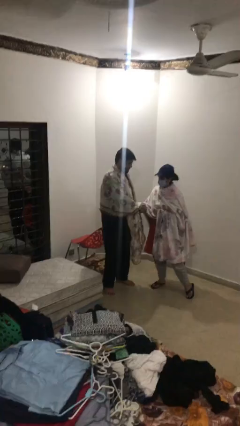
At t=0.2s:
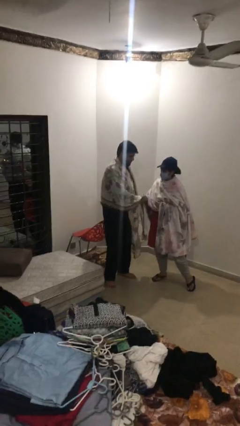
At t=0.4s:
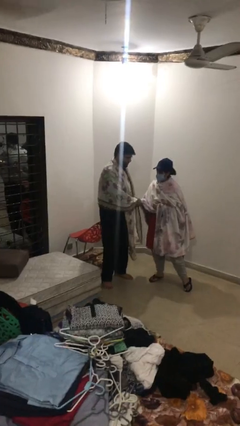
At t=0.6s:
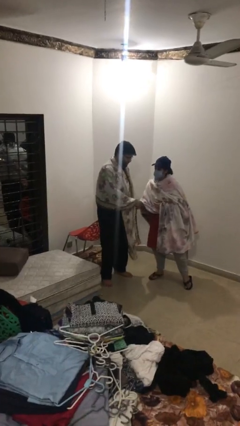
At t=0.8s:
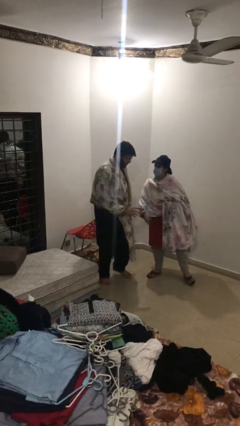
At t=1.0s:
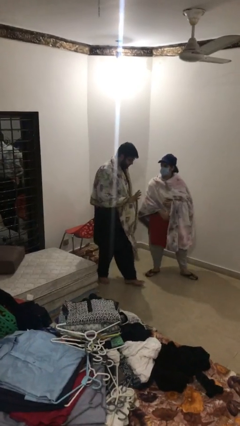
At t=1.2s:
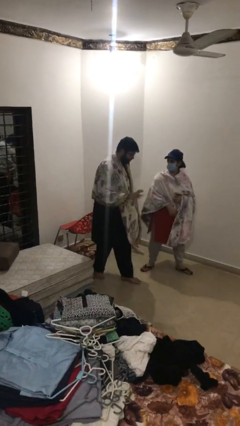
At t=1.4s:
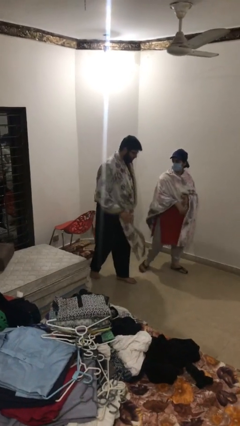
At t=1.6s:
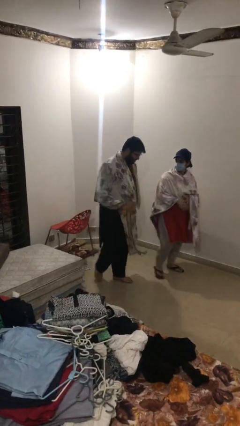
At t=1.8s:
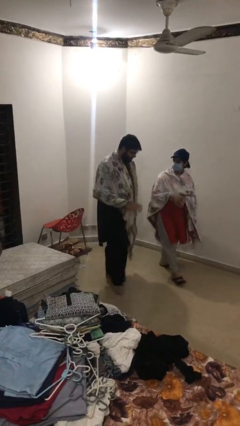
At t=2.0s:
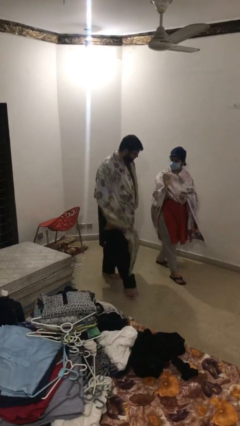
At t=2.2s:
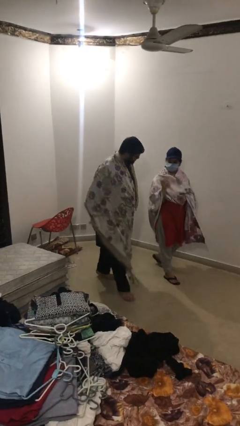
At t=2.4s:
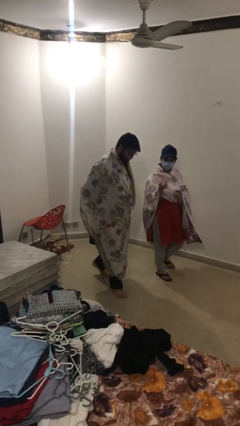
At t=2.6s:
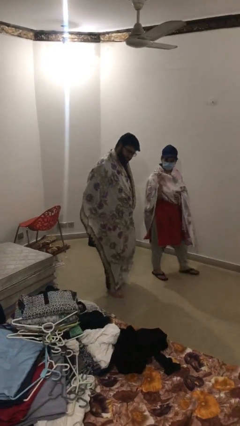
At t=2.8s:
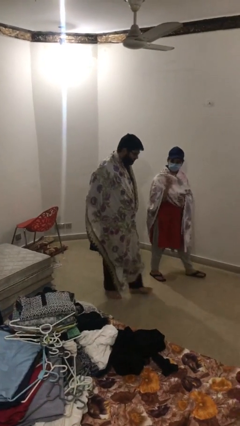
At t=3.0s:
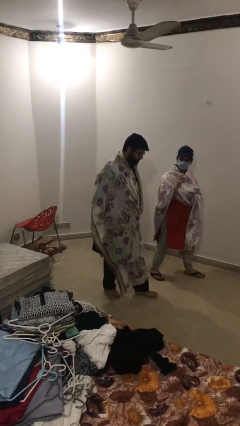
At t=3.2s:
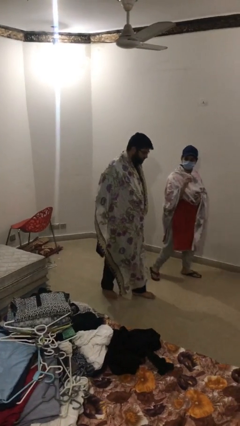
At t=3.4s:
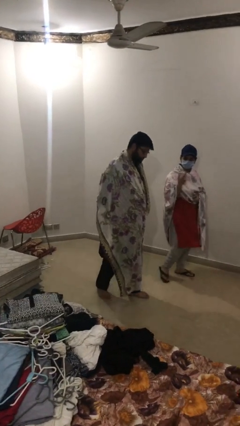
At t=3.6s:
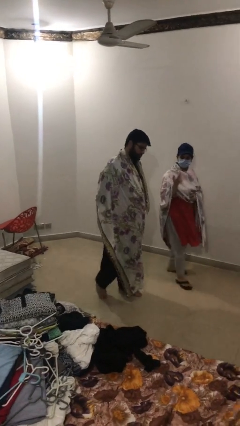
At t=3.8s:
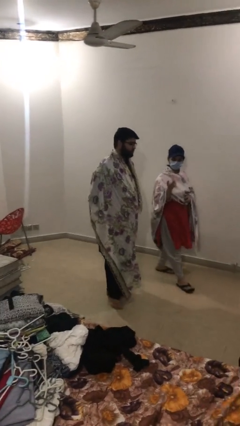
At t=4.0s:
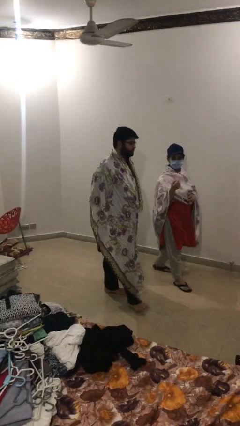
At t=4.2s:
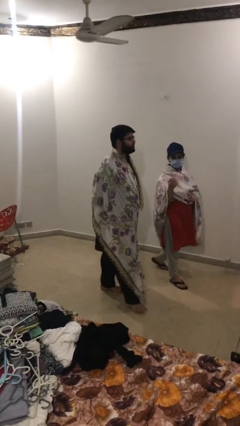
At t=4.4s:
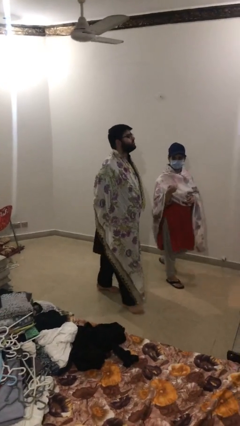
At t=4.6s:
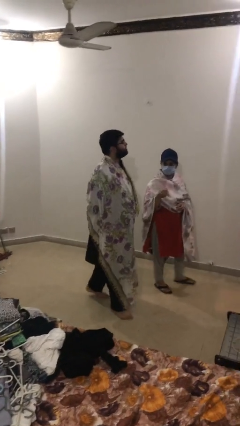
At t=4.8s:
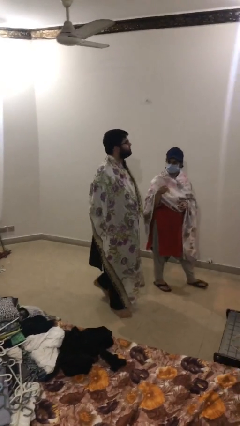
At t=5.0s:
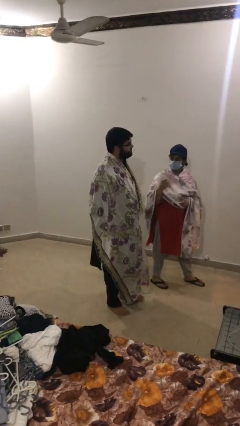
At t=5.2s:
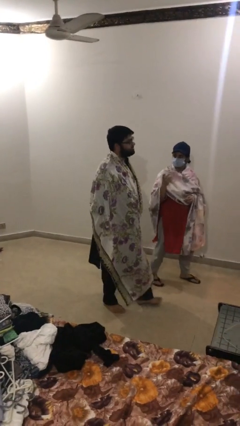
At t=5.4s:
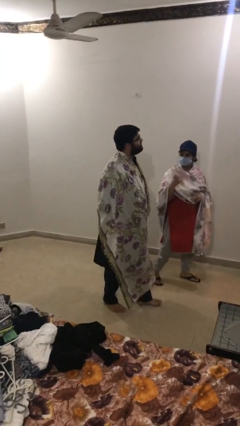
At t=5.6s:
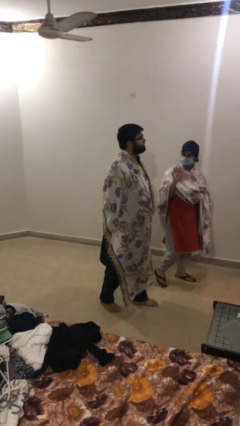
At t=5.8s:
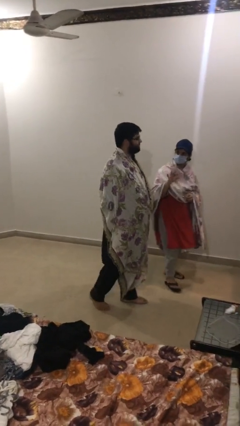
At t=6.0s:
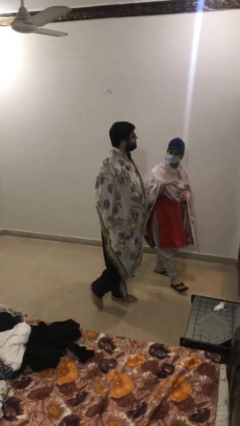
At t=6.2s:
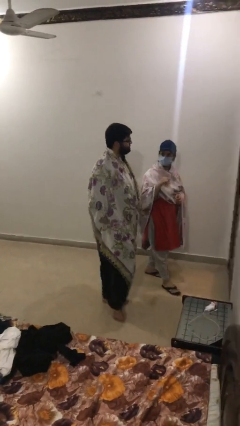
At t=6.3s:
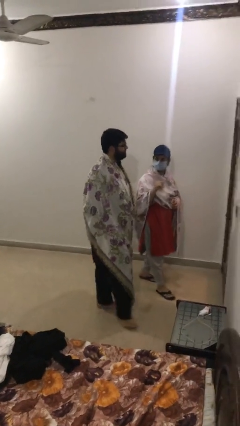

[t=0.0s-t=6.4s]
person talks to person

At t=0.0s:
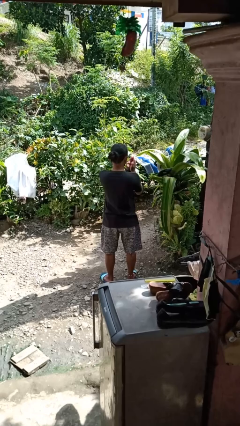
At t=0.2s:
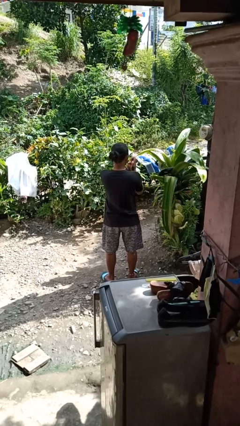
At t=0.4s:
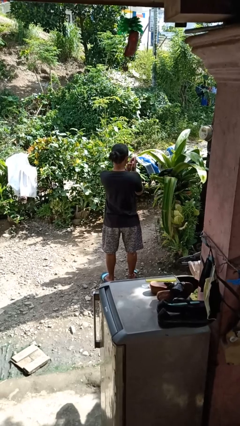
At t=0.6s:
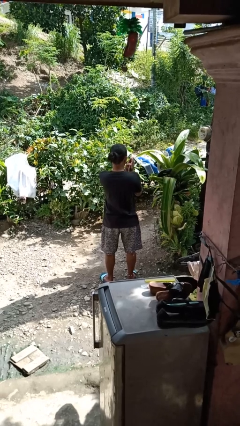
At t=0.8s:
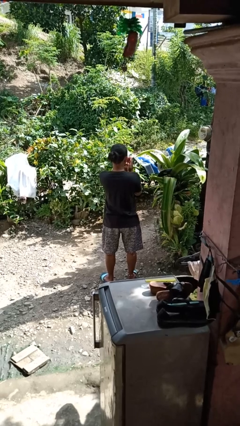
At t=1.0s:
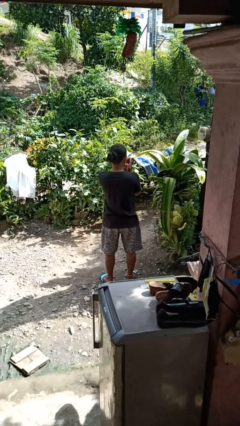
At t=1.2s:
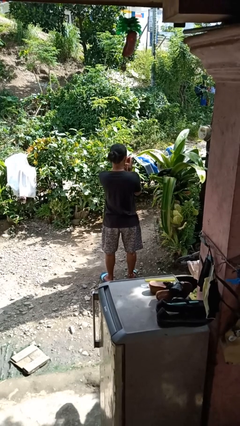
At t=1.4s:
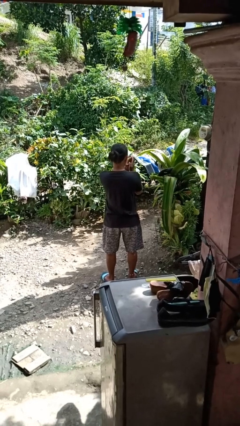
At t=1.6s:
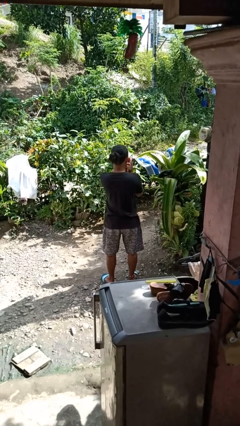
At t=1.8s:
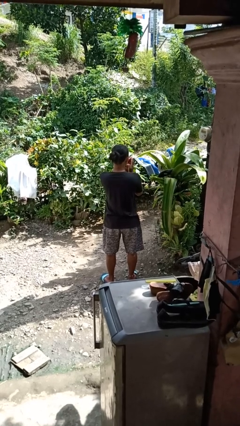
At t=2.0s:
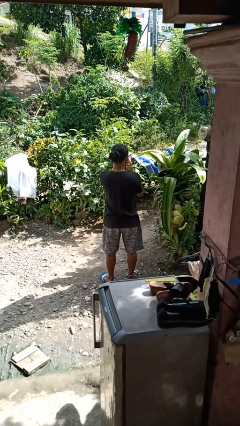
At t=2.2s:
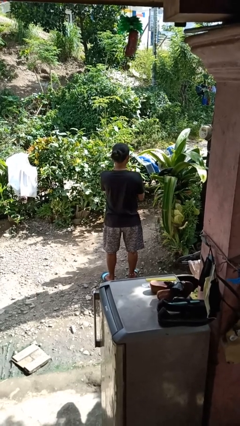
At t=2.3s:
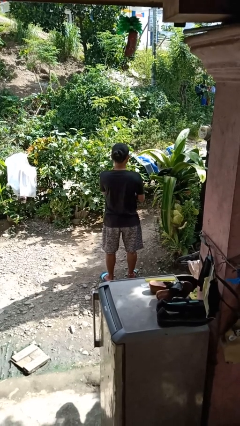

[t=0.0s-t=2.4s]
person blows into hands

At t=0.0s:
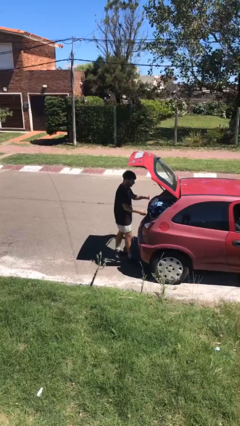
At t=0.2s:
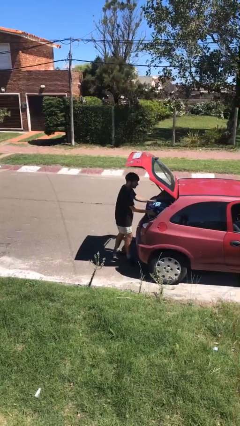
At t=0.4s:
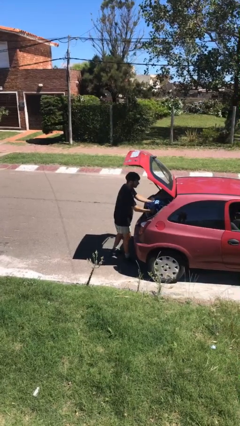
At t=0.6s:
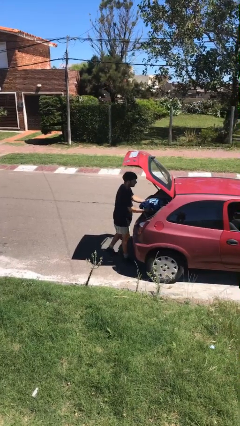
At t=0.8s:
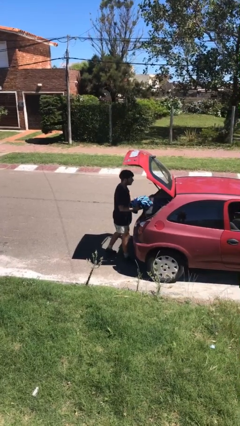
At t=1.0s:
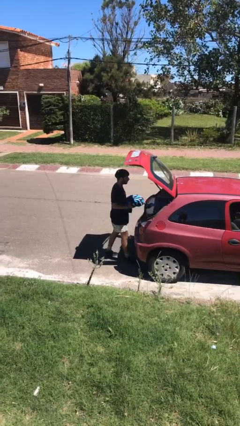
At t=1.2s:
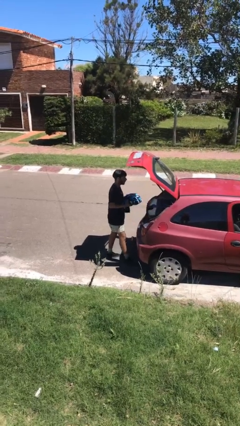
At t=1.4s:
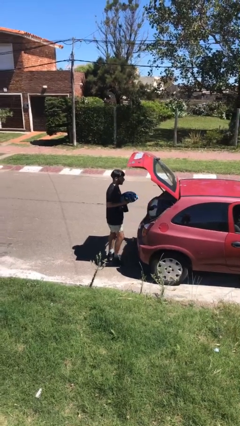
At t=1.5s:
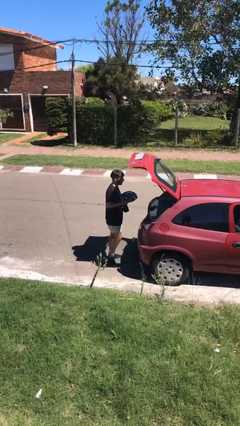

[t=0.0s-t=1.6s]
person unloads car

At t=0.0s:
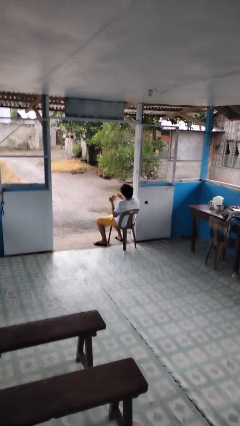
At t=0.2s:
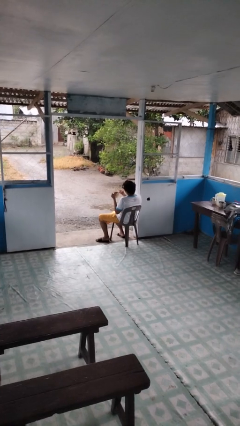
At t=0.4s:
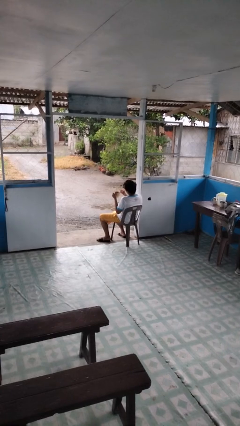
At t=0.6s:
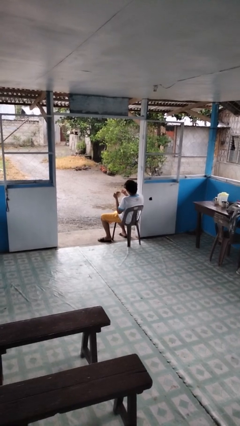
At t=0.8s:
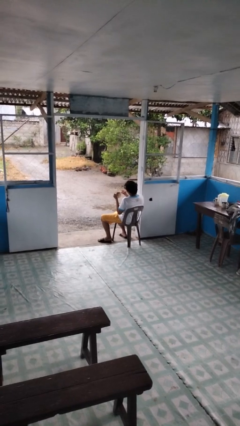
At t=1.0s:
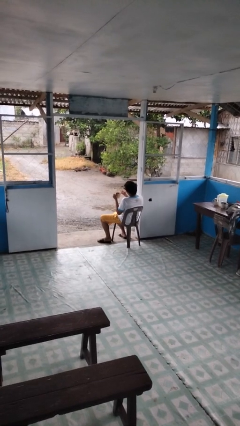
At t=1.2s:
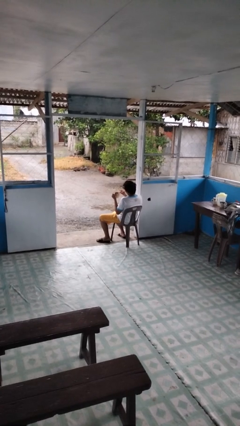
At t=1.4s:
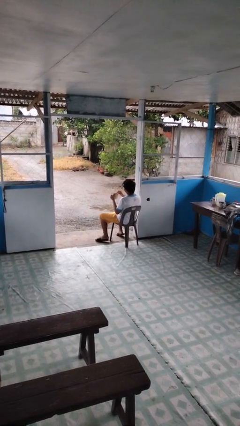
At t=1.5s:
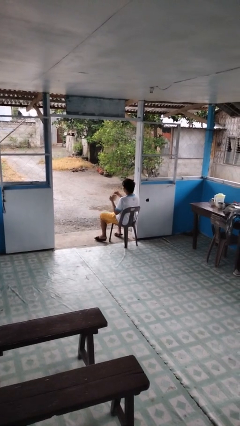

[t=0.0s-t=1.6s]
person drinks from straw

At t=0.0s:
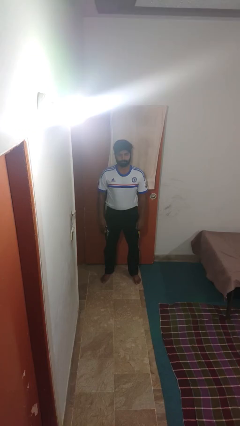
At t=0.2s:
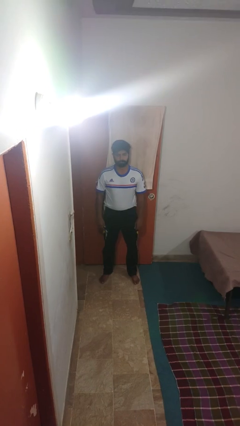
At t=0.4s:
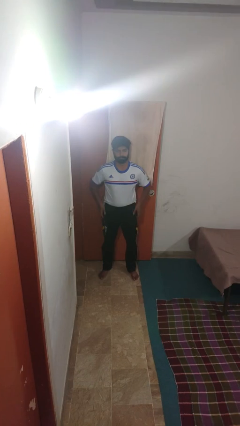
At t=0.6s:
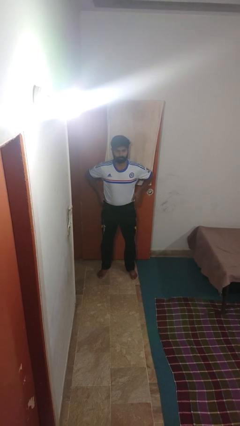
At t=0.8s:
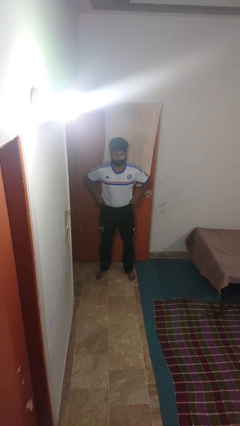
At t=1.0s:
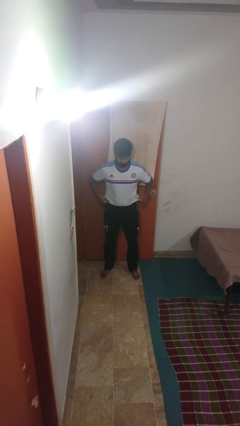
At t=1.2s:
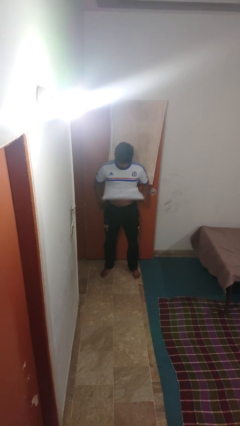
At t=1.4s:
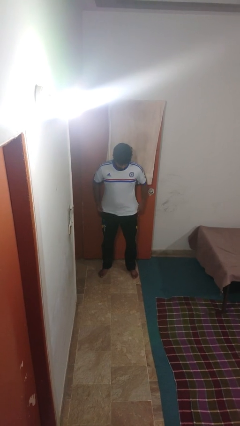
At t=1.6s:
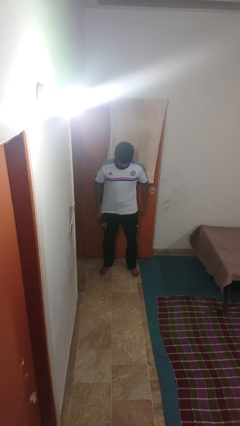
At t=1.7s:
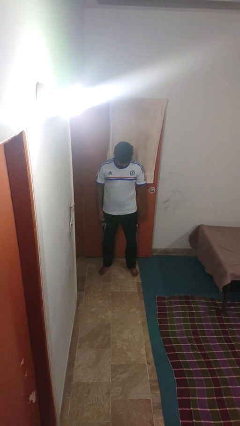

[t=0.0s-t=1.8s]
person untucks shirt

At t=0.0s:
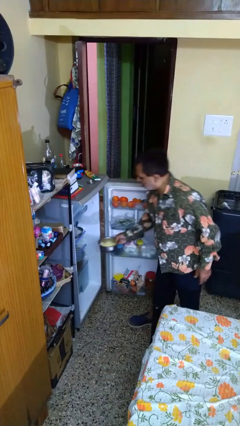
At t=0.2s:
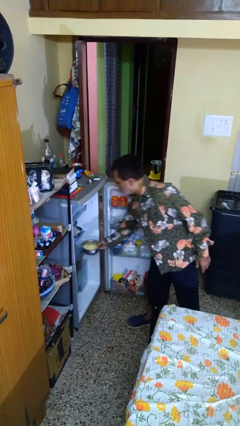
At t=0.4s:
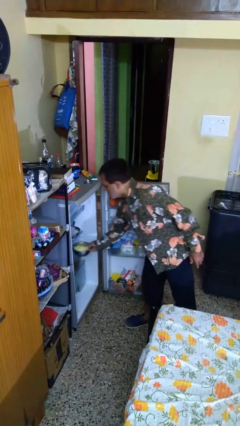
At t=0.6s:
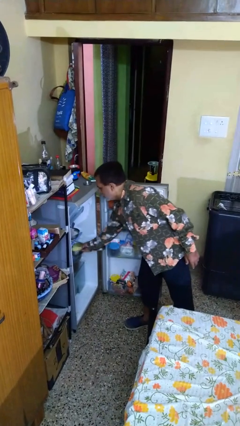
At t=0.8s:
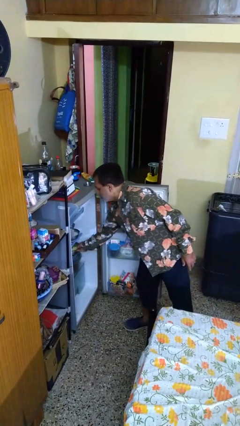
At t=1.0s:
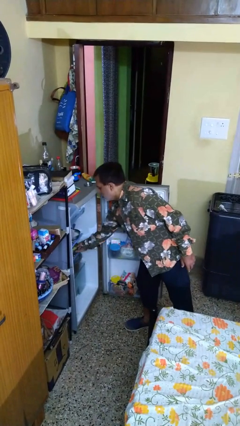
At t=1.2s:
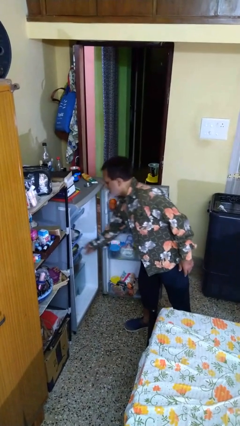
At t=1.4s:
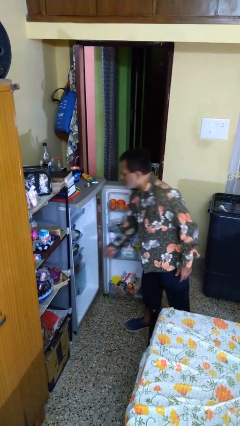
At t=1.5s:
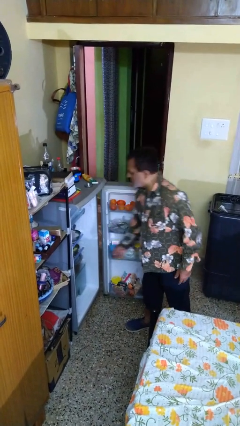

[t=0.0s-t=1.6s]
person puts object into refrigerator

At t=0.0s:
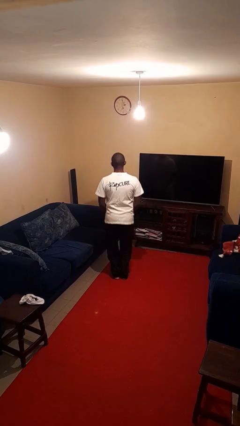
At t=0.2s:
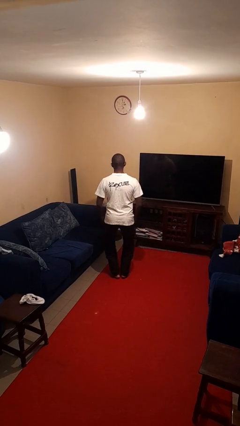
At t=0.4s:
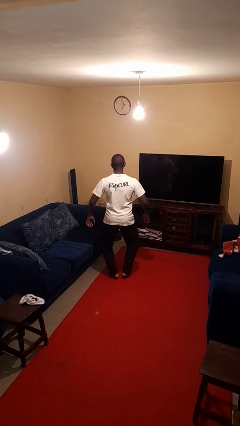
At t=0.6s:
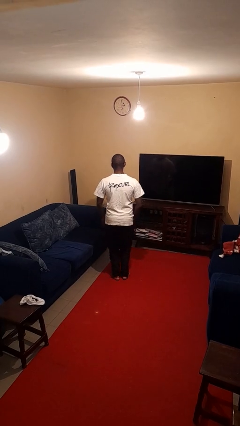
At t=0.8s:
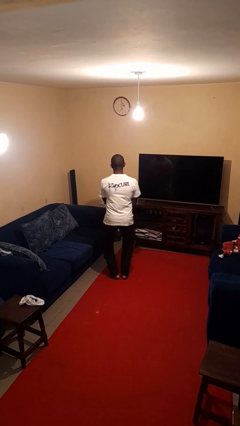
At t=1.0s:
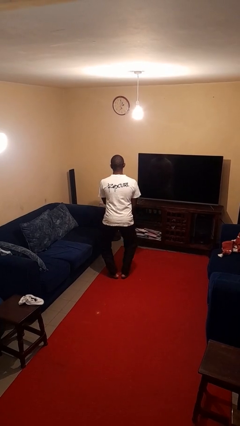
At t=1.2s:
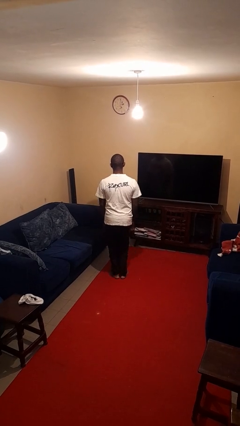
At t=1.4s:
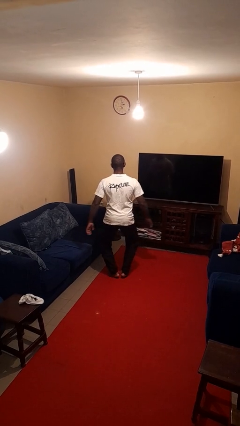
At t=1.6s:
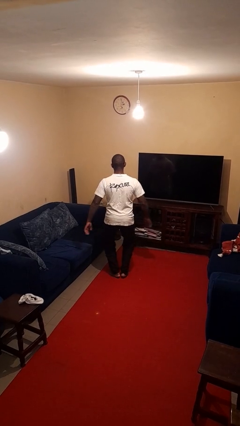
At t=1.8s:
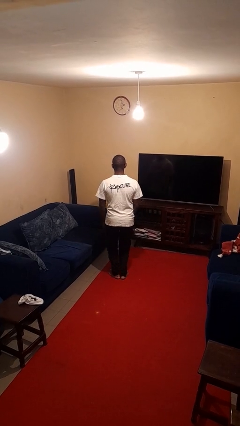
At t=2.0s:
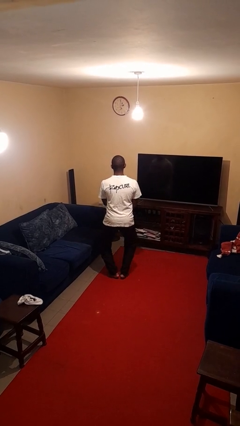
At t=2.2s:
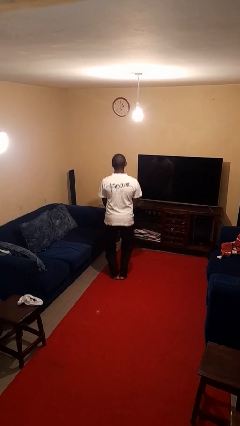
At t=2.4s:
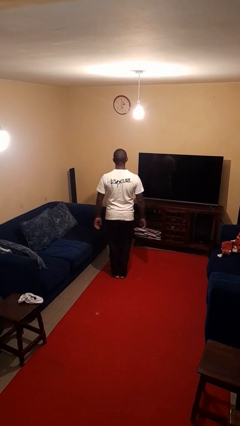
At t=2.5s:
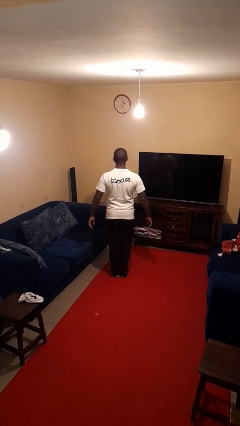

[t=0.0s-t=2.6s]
person dances in place
